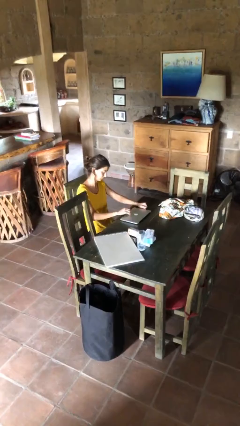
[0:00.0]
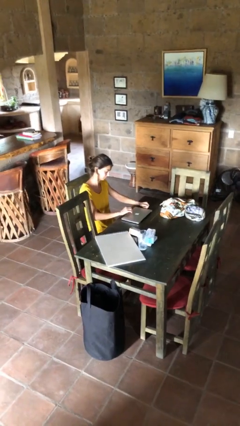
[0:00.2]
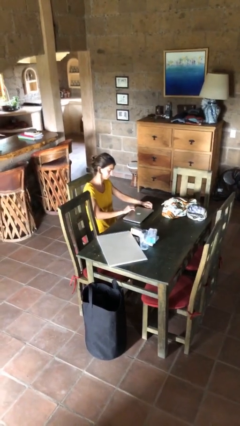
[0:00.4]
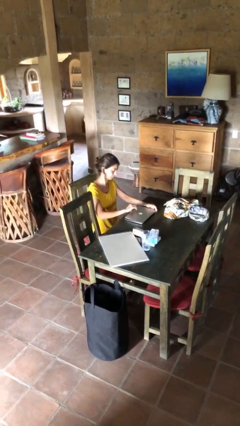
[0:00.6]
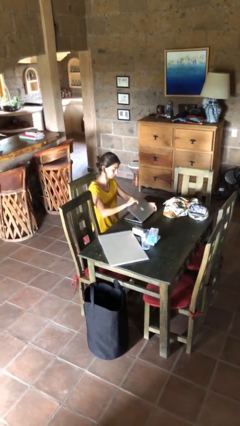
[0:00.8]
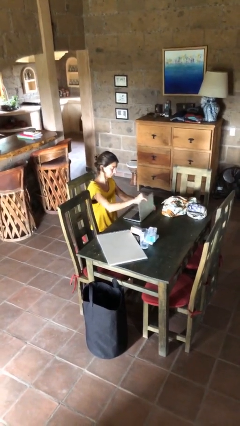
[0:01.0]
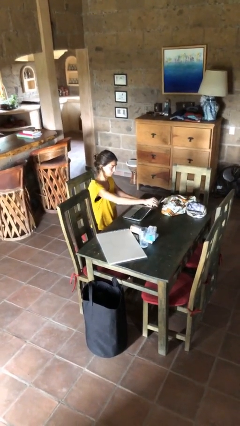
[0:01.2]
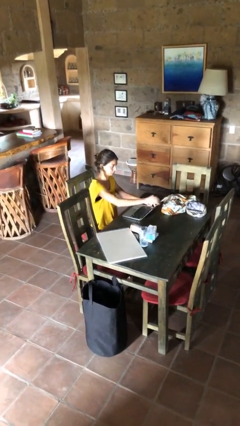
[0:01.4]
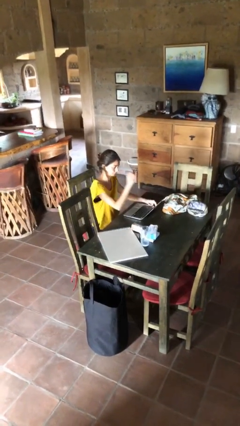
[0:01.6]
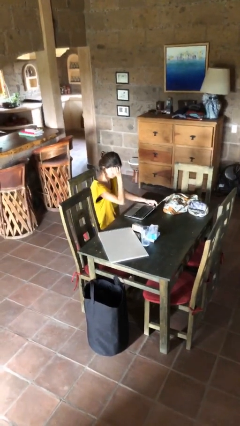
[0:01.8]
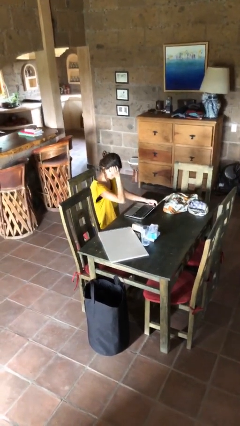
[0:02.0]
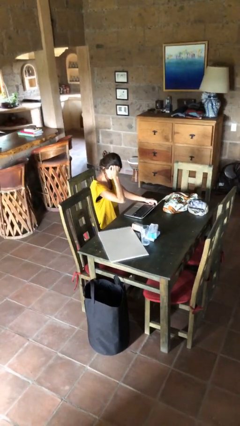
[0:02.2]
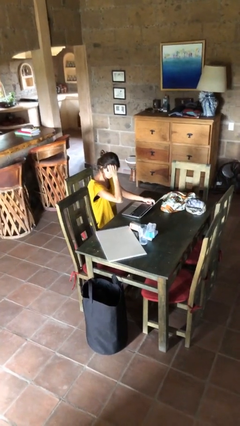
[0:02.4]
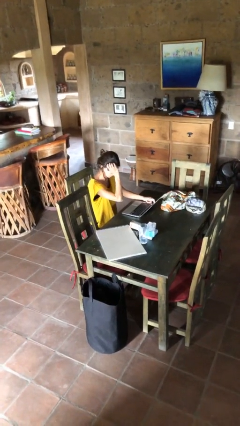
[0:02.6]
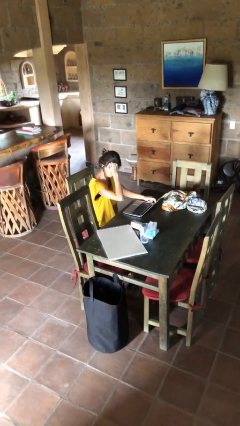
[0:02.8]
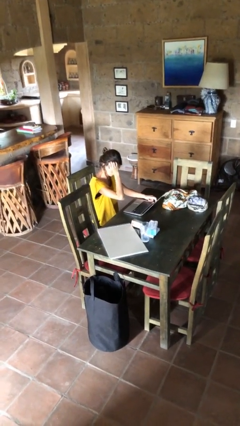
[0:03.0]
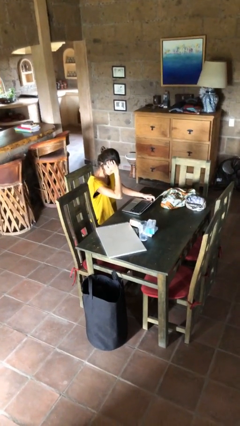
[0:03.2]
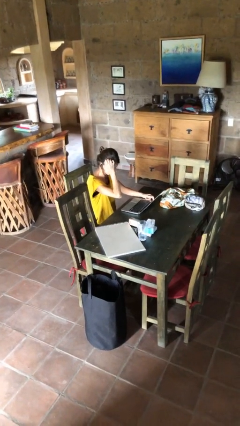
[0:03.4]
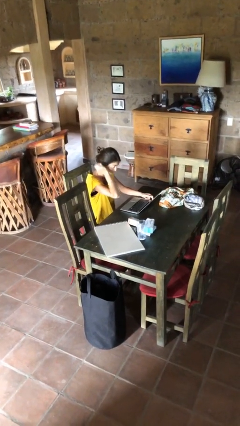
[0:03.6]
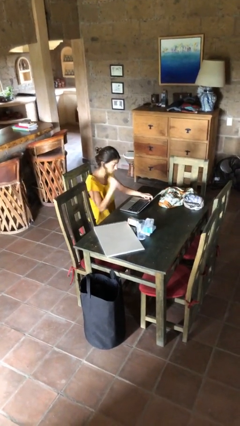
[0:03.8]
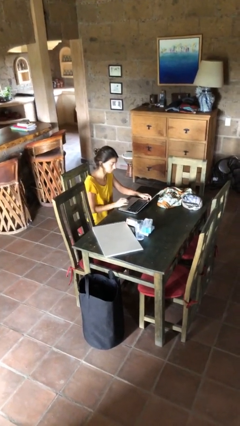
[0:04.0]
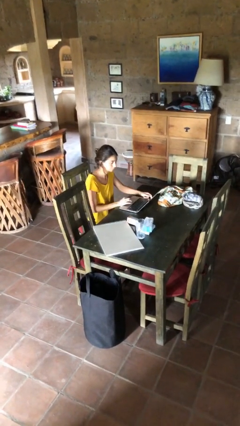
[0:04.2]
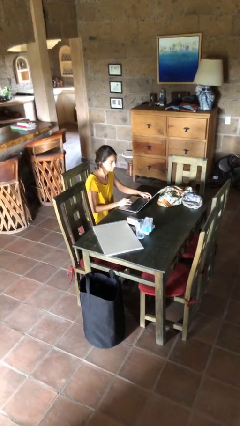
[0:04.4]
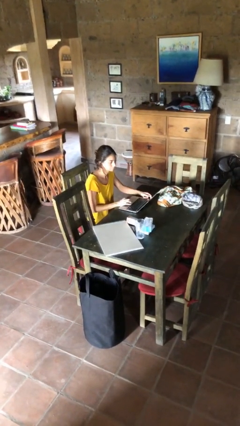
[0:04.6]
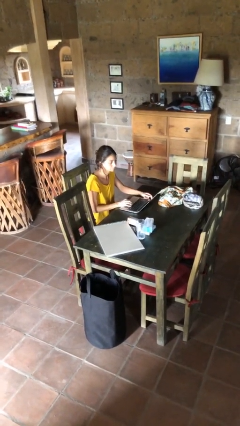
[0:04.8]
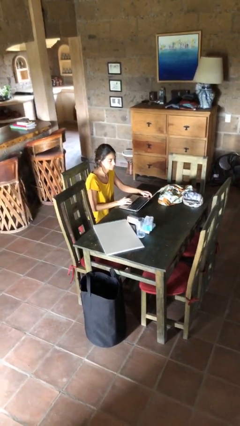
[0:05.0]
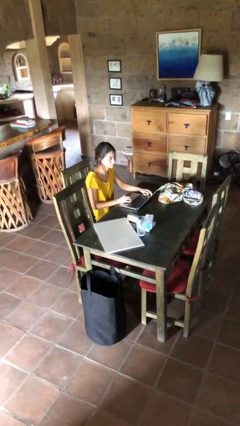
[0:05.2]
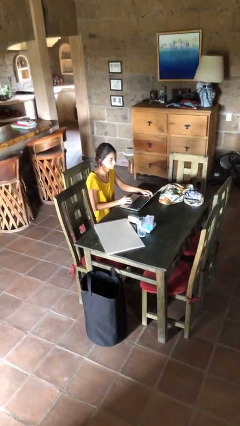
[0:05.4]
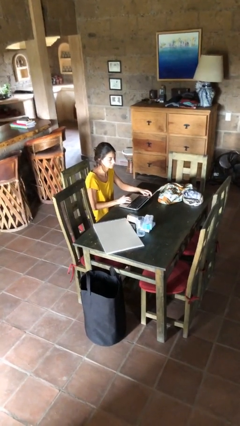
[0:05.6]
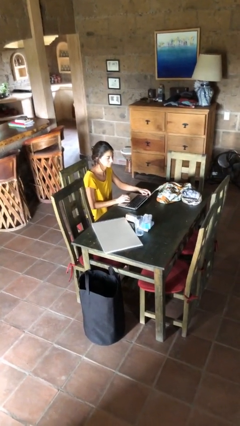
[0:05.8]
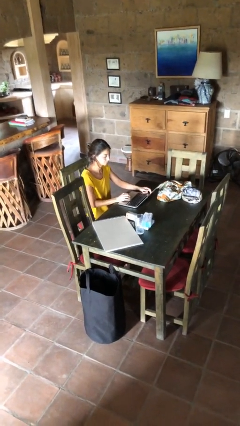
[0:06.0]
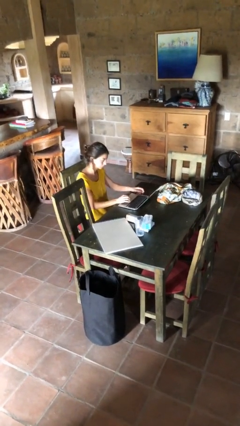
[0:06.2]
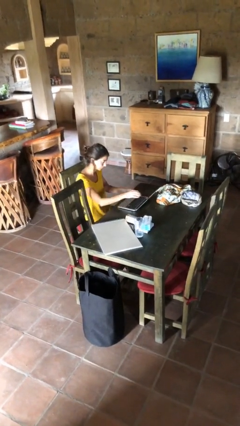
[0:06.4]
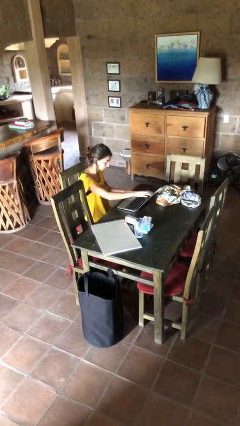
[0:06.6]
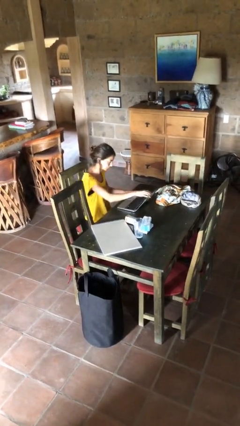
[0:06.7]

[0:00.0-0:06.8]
person interacts with laptop

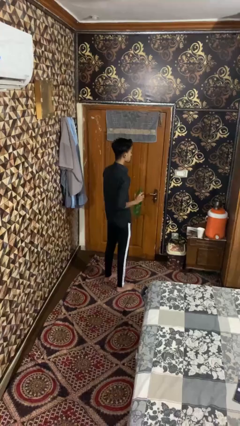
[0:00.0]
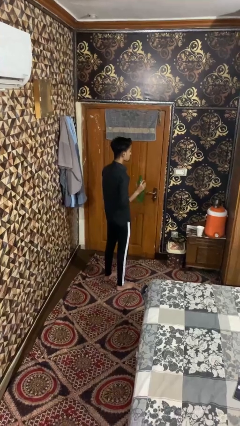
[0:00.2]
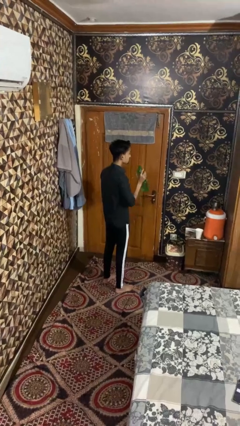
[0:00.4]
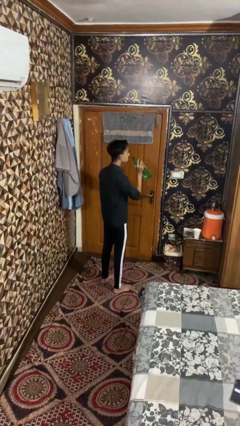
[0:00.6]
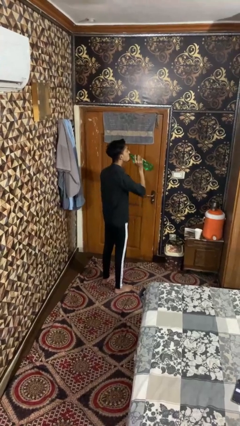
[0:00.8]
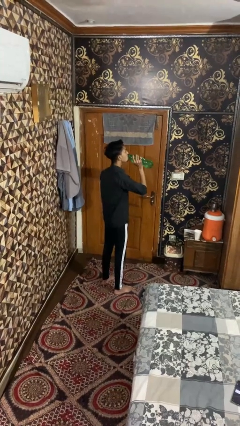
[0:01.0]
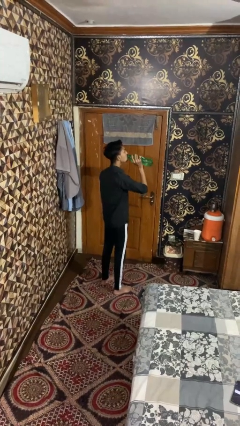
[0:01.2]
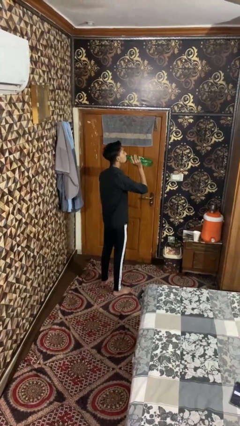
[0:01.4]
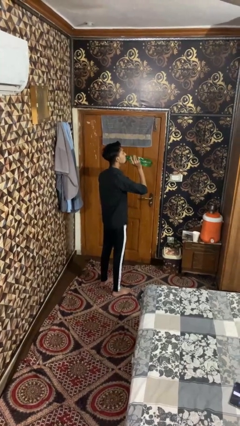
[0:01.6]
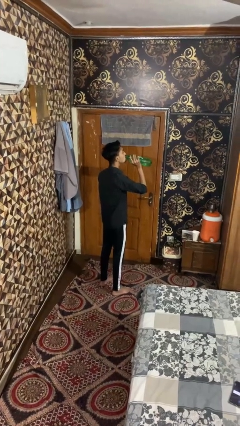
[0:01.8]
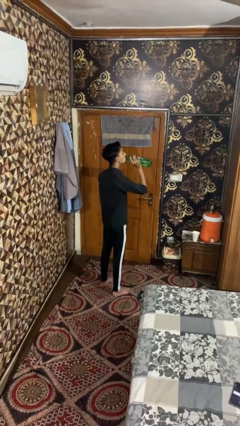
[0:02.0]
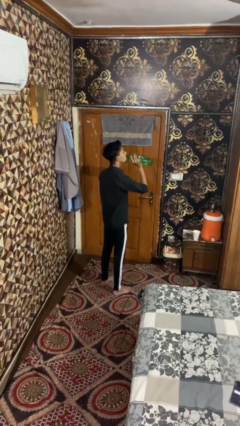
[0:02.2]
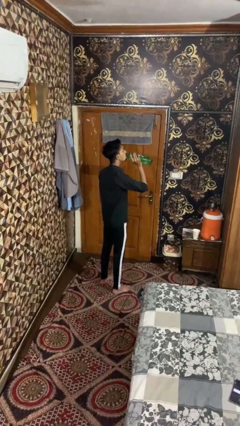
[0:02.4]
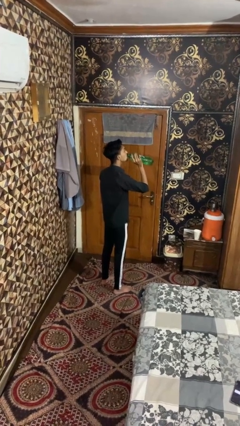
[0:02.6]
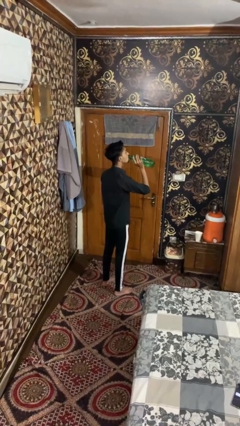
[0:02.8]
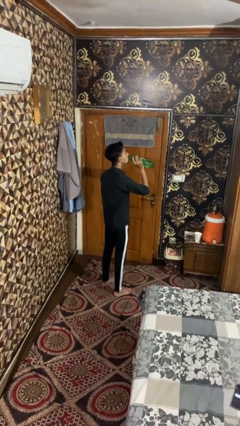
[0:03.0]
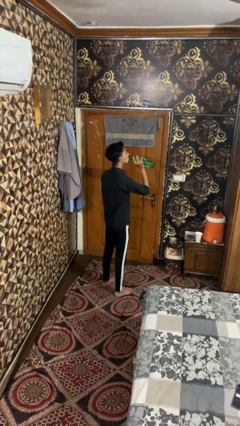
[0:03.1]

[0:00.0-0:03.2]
person drinks from bottle

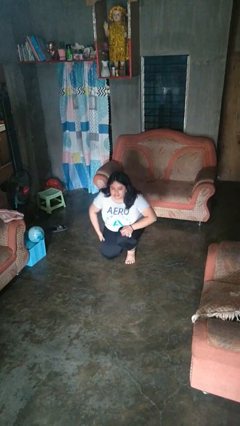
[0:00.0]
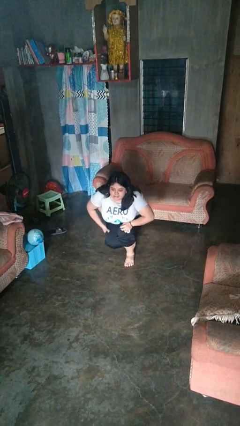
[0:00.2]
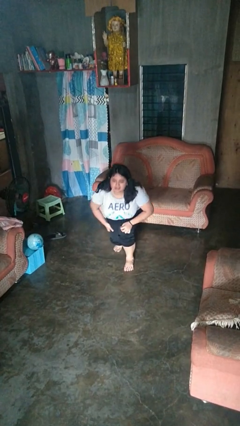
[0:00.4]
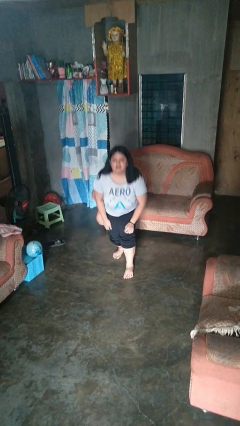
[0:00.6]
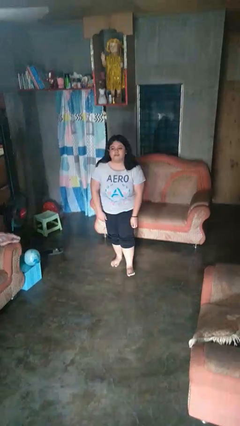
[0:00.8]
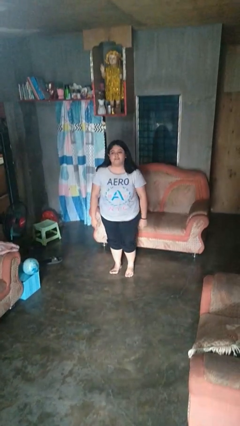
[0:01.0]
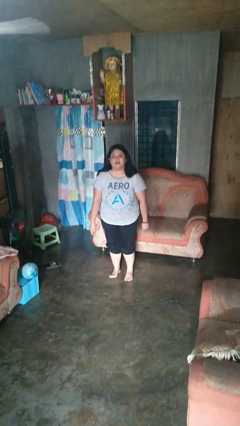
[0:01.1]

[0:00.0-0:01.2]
person stands up from floor

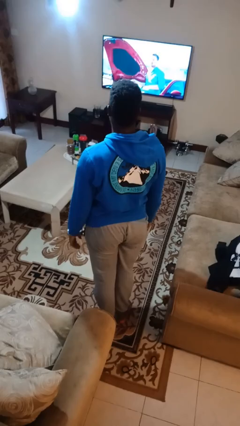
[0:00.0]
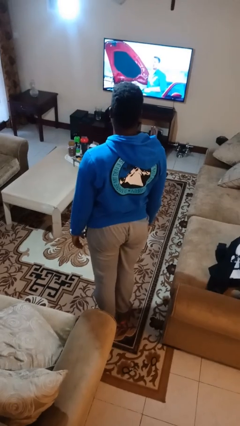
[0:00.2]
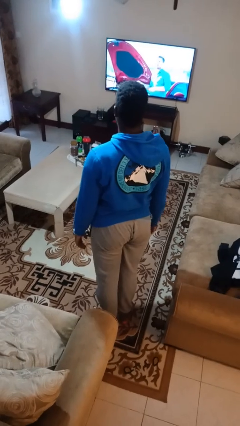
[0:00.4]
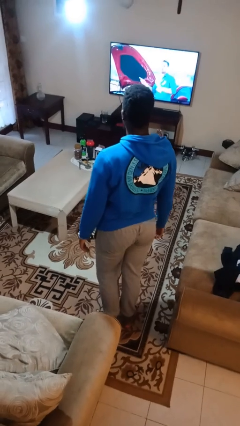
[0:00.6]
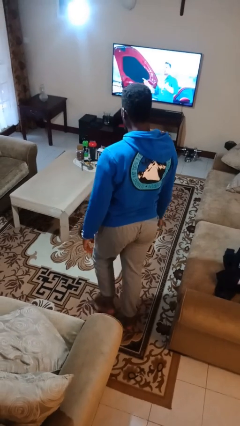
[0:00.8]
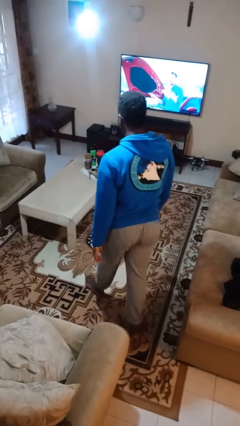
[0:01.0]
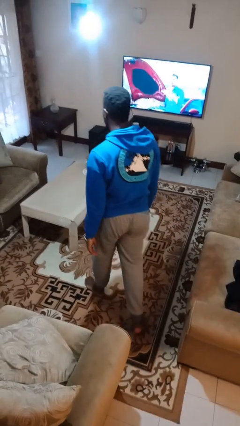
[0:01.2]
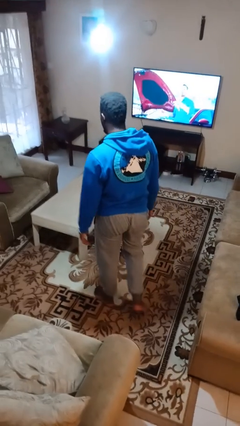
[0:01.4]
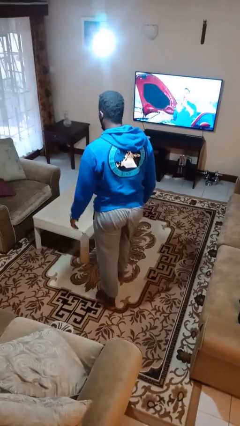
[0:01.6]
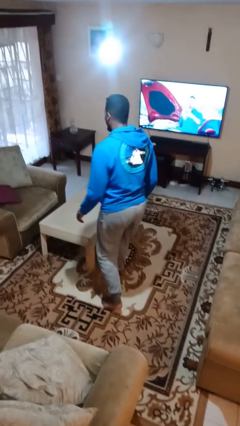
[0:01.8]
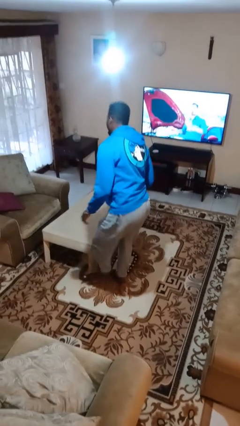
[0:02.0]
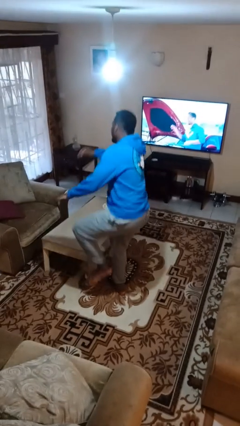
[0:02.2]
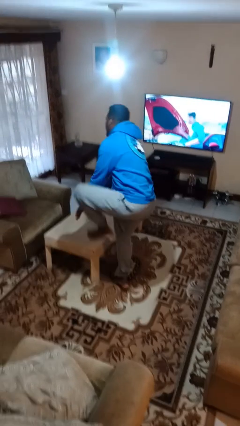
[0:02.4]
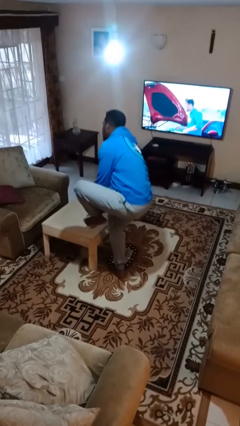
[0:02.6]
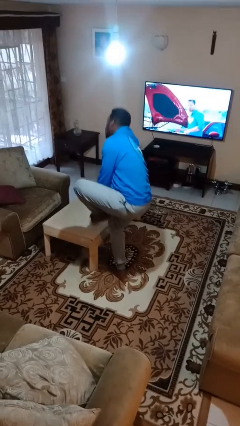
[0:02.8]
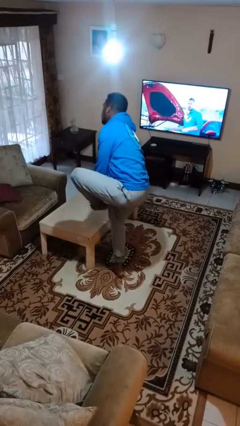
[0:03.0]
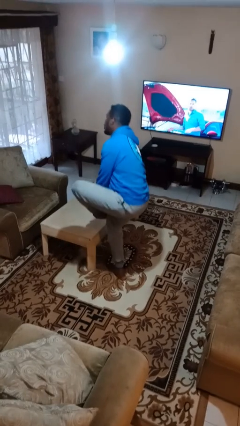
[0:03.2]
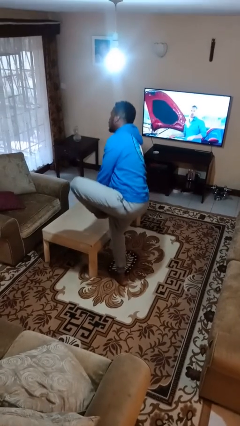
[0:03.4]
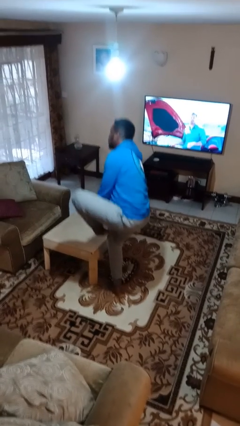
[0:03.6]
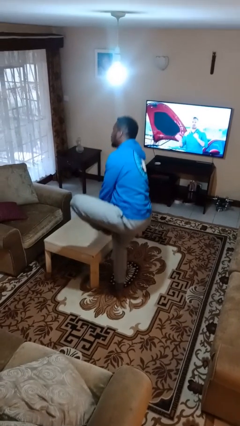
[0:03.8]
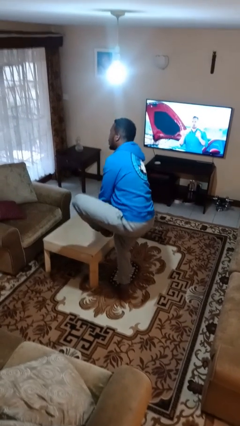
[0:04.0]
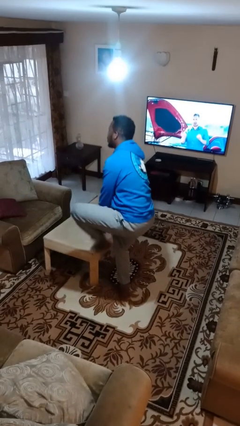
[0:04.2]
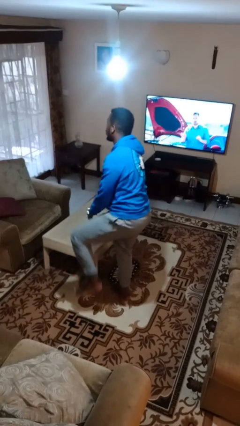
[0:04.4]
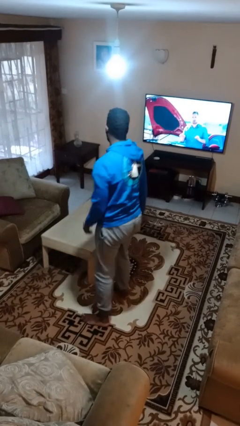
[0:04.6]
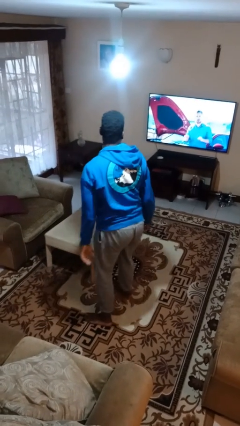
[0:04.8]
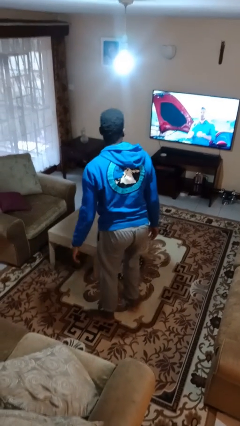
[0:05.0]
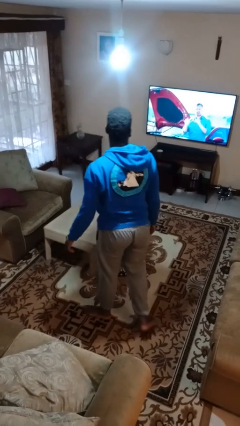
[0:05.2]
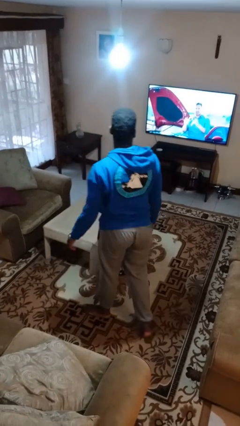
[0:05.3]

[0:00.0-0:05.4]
person stubs toe

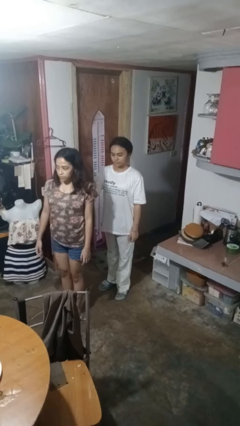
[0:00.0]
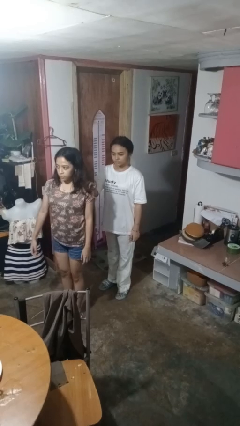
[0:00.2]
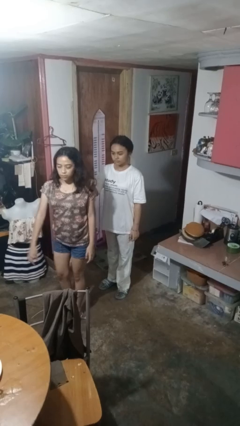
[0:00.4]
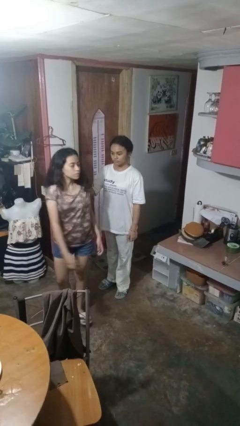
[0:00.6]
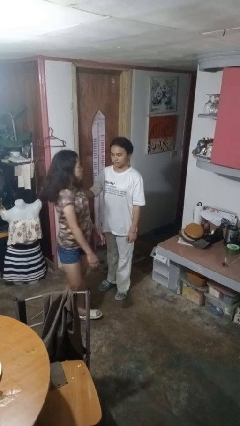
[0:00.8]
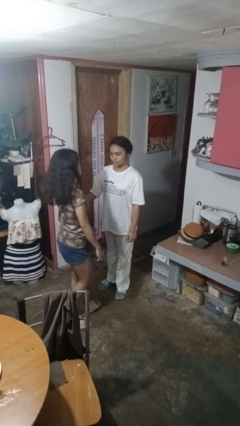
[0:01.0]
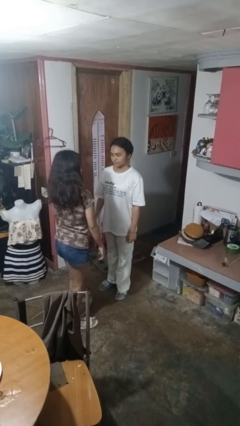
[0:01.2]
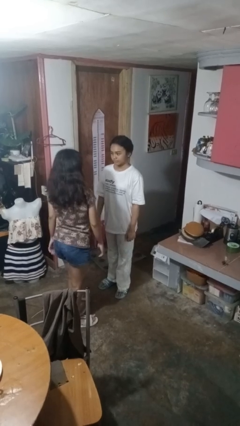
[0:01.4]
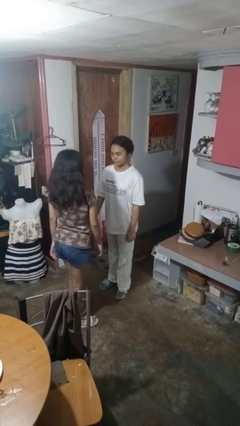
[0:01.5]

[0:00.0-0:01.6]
person spins person around
